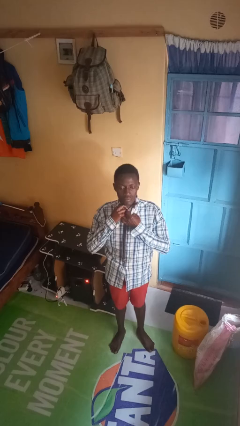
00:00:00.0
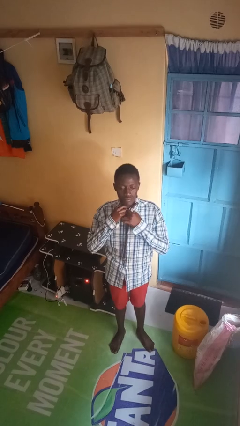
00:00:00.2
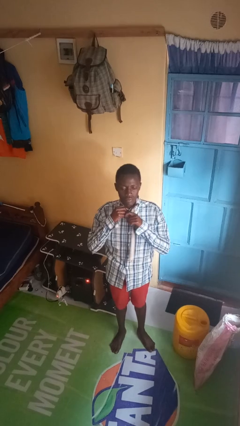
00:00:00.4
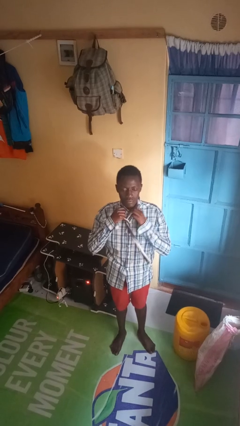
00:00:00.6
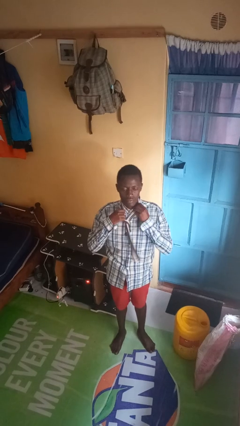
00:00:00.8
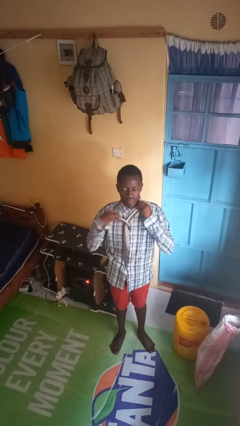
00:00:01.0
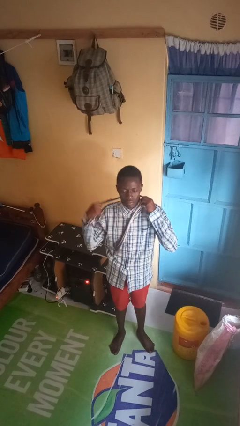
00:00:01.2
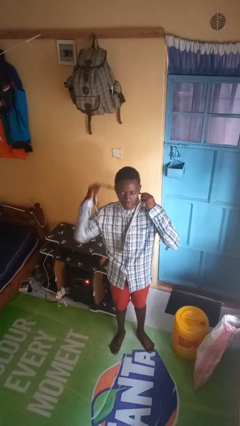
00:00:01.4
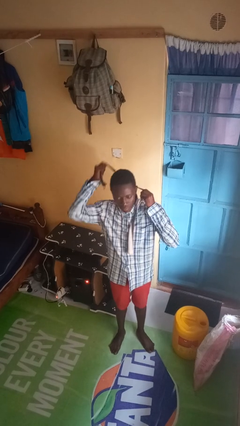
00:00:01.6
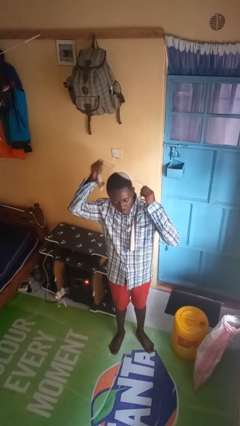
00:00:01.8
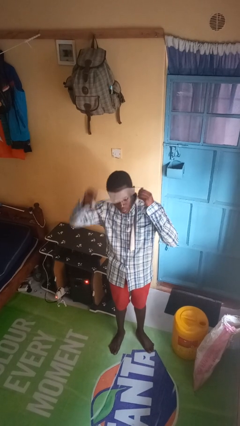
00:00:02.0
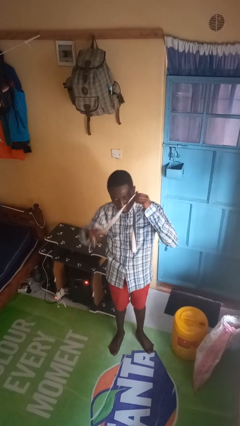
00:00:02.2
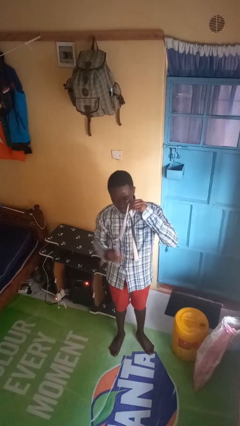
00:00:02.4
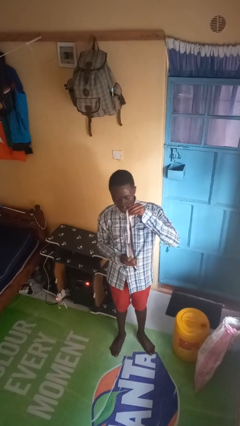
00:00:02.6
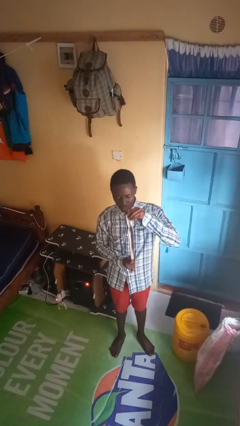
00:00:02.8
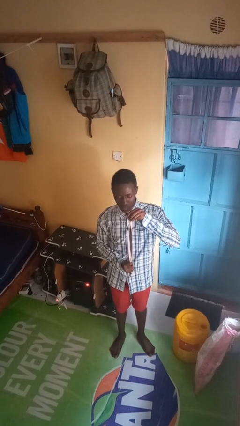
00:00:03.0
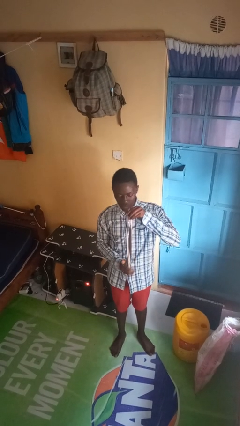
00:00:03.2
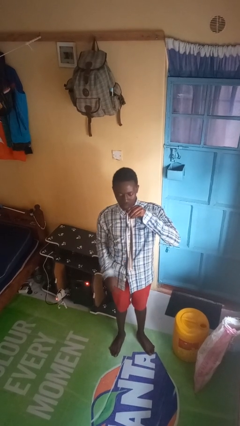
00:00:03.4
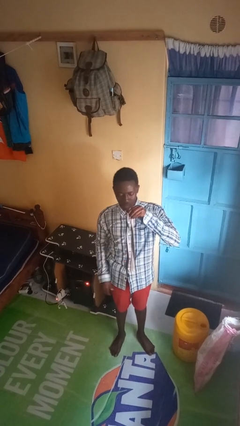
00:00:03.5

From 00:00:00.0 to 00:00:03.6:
person takes off necktie

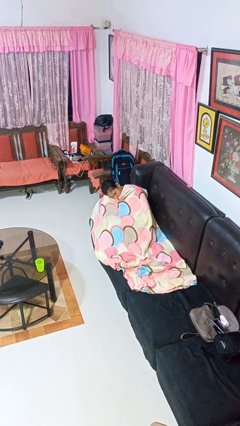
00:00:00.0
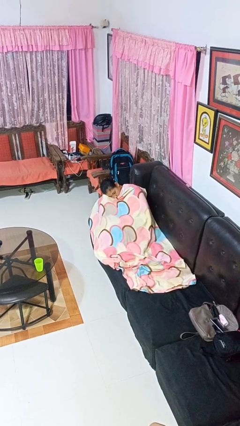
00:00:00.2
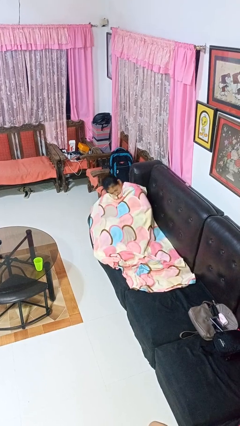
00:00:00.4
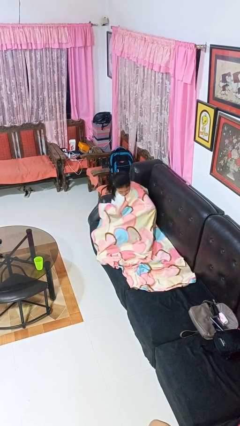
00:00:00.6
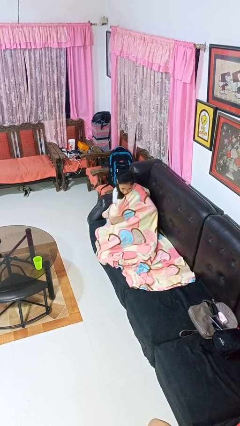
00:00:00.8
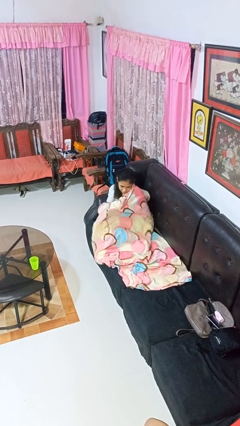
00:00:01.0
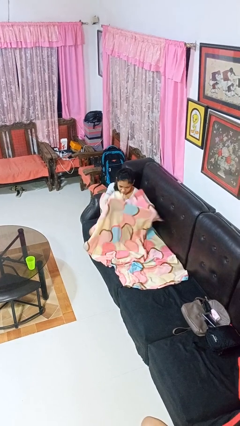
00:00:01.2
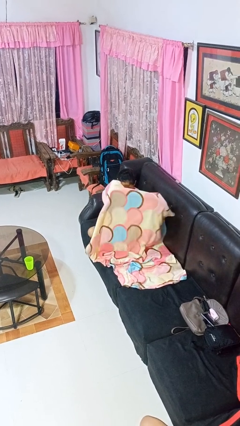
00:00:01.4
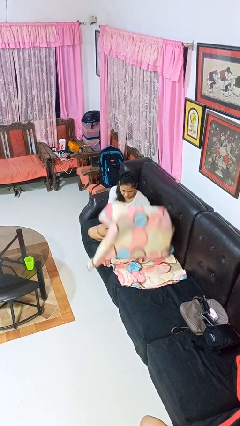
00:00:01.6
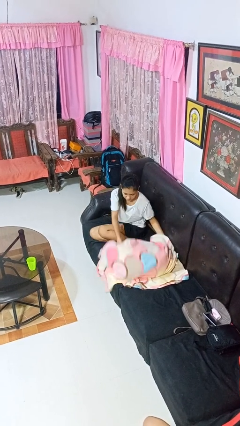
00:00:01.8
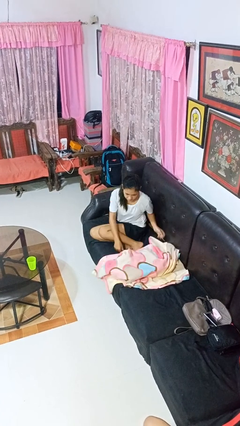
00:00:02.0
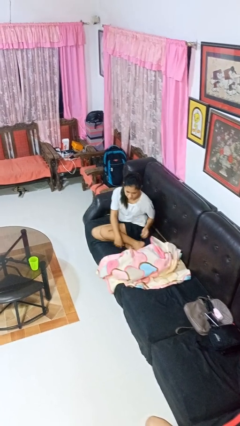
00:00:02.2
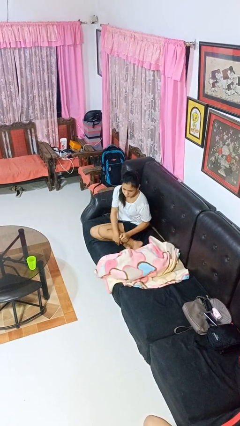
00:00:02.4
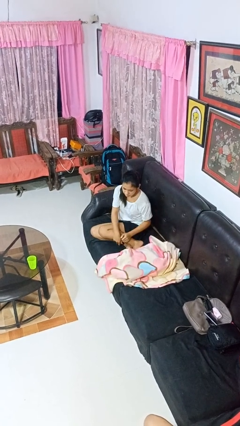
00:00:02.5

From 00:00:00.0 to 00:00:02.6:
person uncovers with blanket

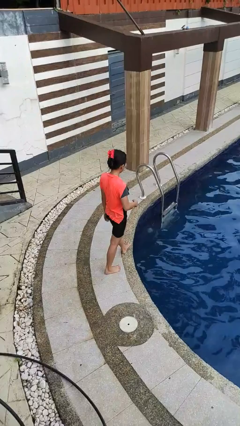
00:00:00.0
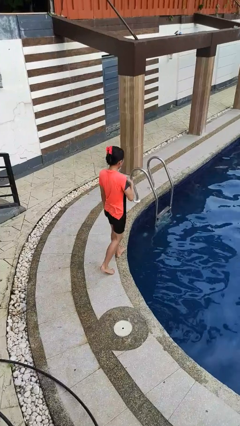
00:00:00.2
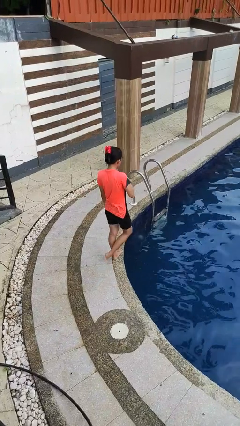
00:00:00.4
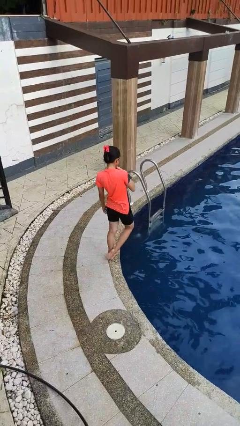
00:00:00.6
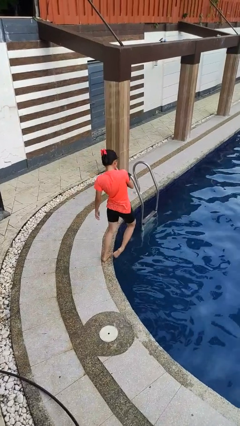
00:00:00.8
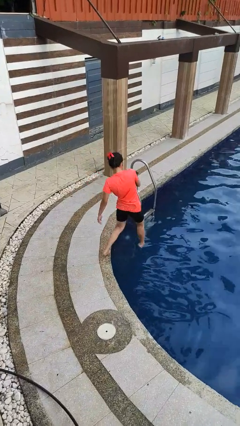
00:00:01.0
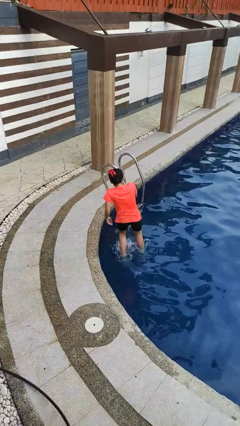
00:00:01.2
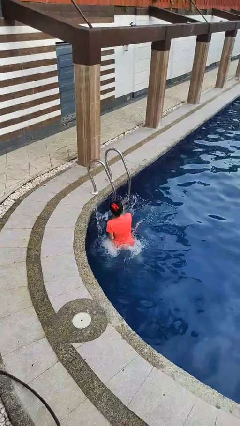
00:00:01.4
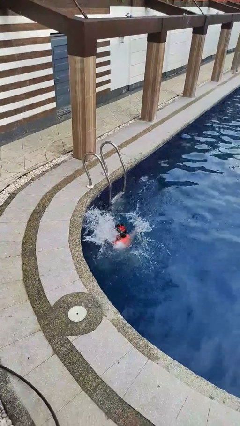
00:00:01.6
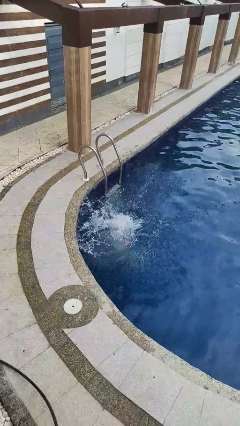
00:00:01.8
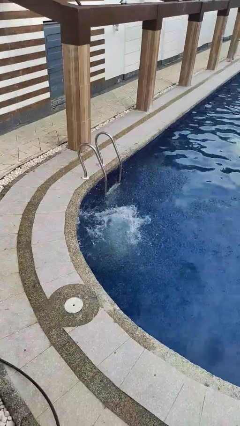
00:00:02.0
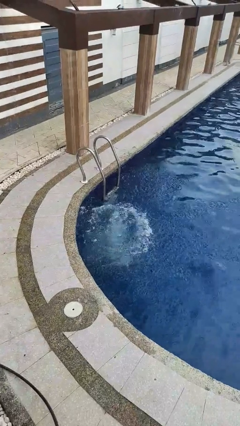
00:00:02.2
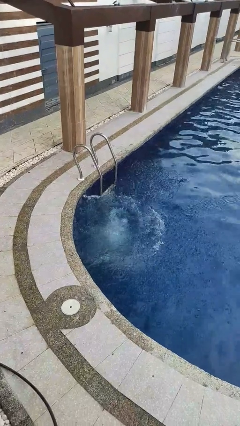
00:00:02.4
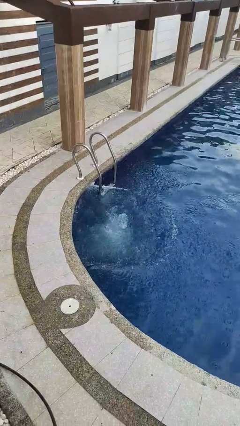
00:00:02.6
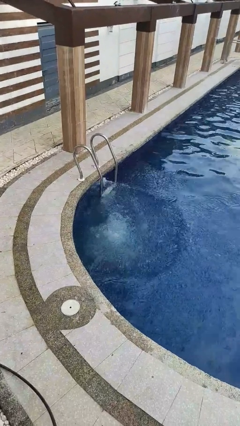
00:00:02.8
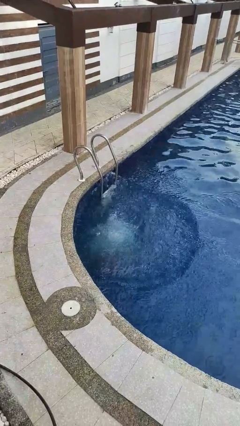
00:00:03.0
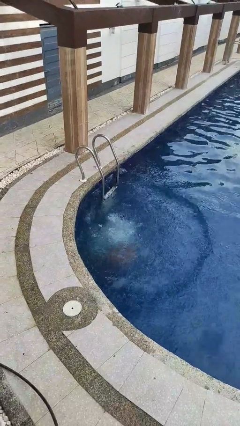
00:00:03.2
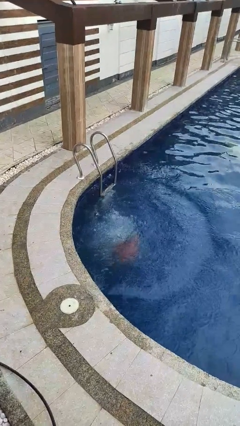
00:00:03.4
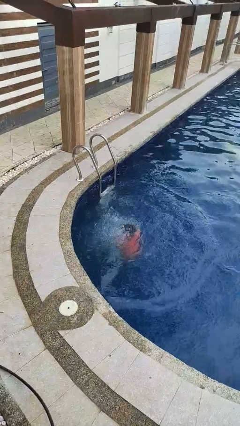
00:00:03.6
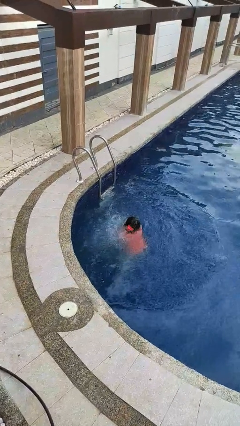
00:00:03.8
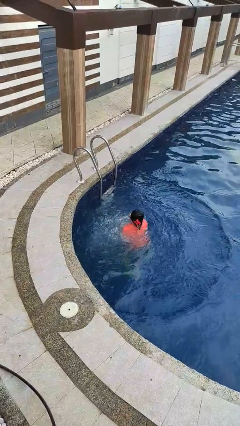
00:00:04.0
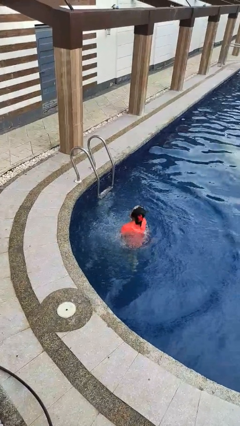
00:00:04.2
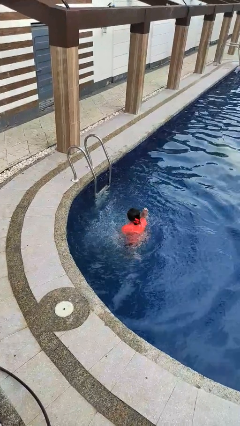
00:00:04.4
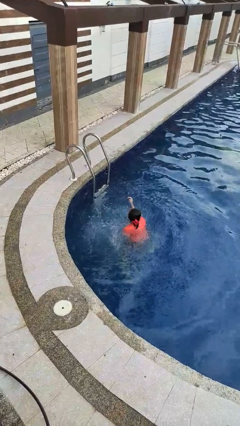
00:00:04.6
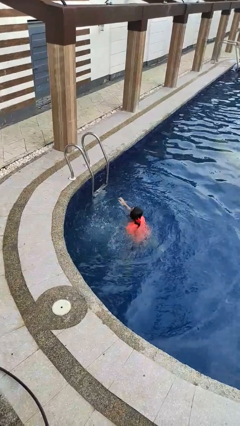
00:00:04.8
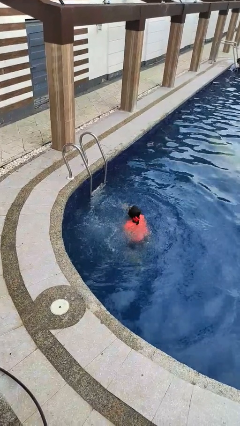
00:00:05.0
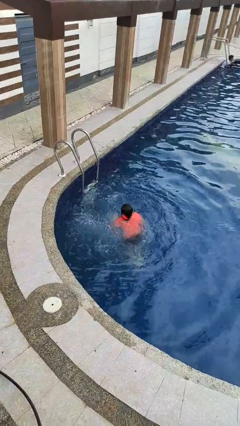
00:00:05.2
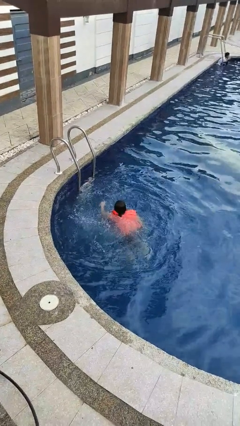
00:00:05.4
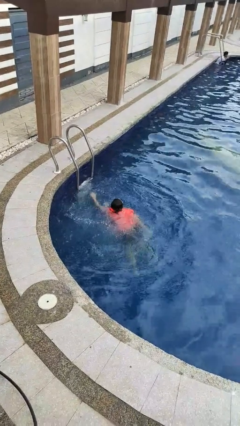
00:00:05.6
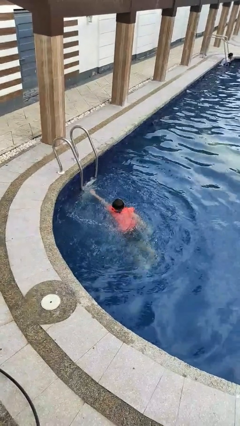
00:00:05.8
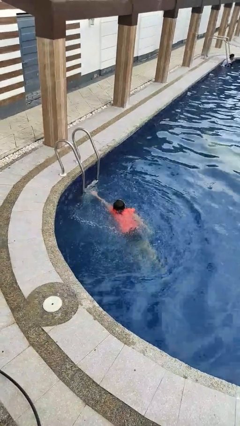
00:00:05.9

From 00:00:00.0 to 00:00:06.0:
person falls into pool

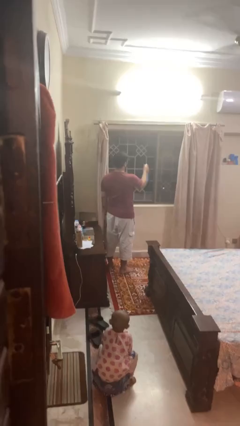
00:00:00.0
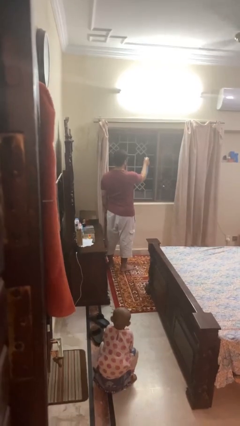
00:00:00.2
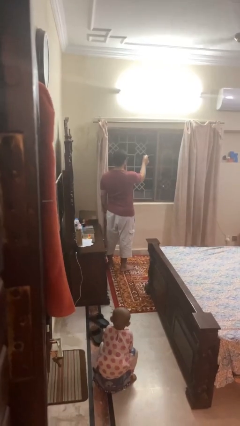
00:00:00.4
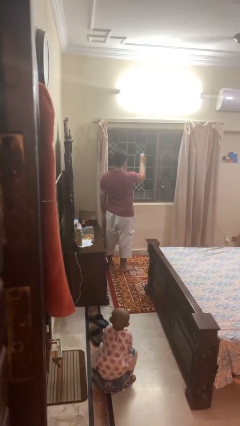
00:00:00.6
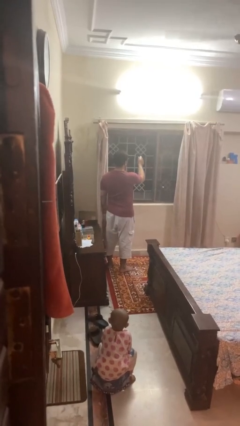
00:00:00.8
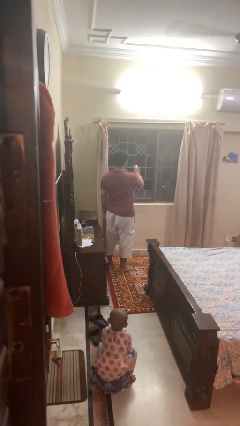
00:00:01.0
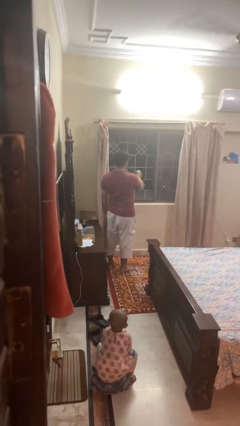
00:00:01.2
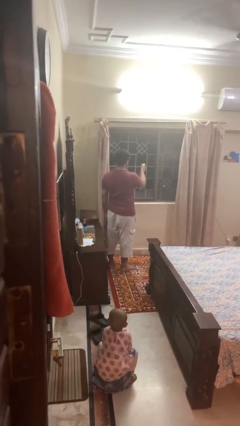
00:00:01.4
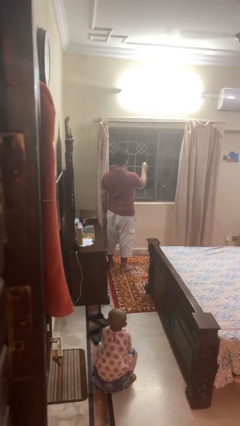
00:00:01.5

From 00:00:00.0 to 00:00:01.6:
person sprays from bottle

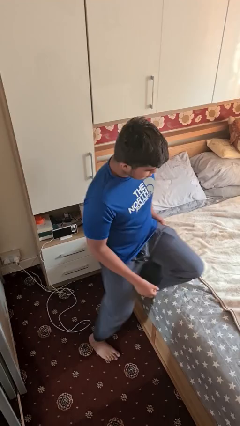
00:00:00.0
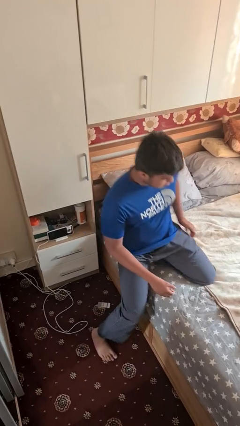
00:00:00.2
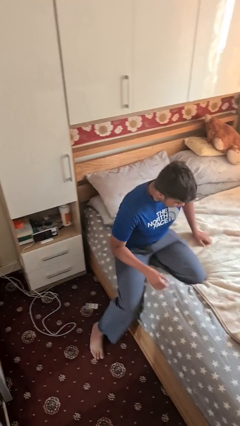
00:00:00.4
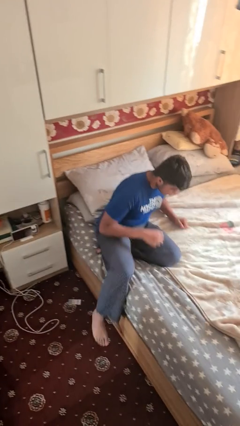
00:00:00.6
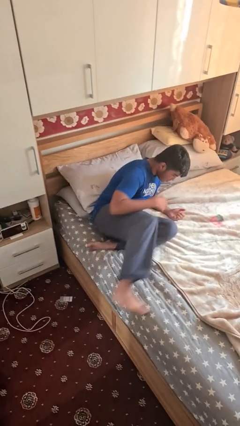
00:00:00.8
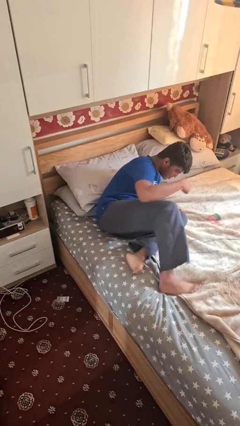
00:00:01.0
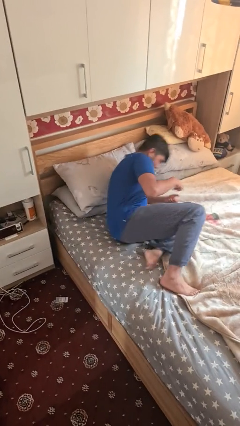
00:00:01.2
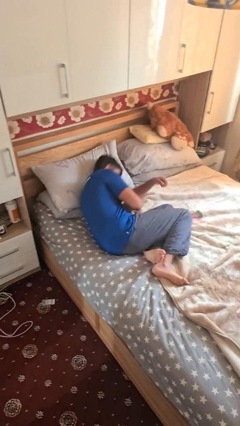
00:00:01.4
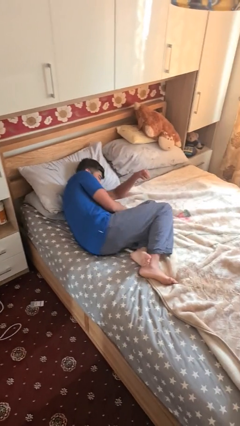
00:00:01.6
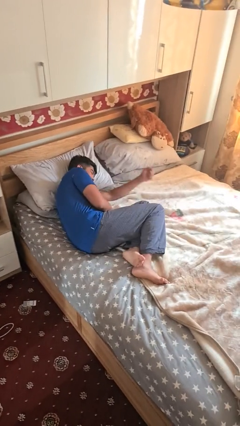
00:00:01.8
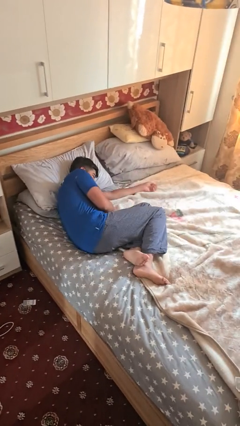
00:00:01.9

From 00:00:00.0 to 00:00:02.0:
person lies down on bed

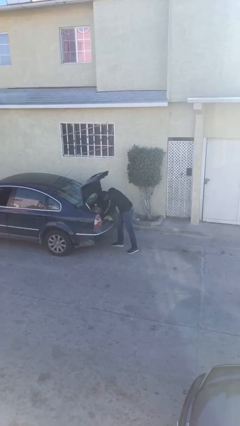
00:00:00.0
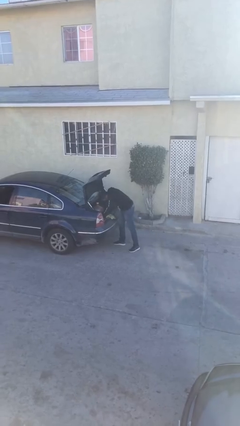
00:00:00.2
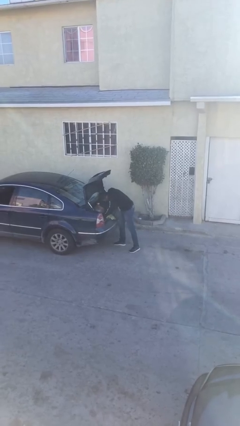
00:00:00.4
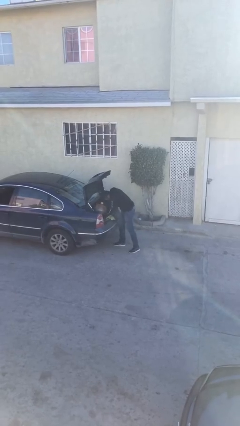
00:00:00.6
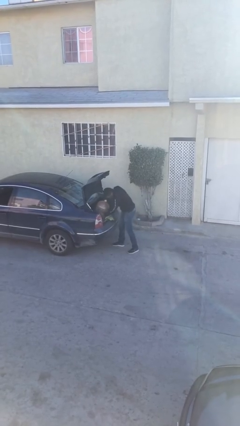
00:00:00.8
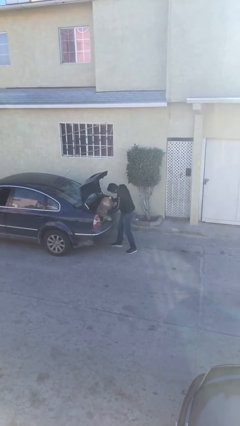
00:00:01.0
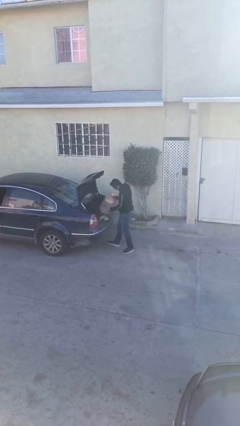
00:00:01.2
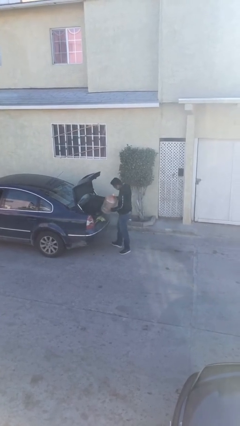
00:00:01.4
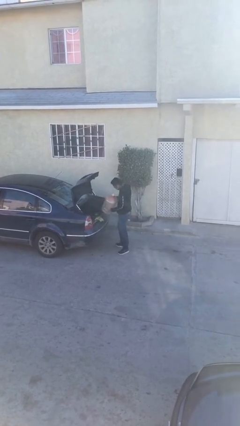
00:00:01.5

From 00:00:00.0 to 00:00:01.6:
person unloads car
